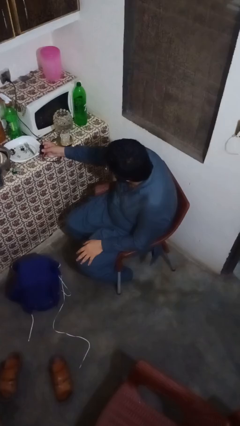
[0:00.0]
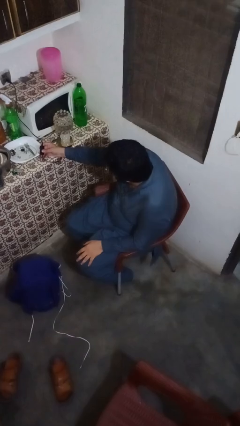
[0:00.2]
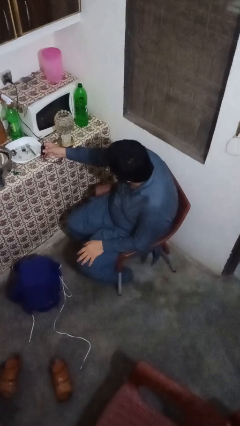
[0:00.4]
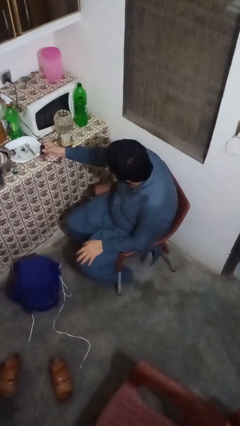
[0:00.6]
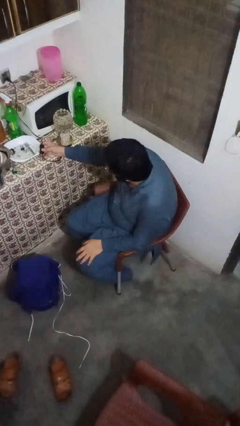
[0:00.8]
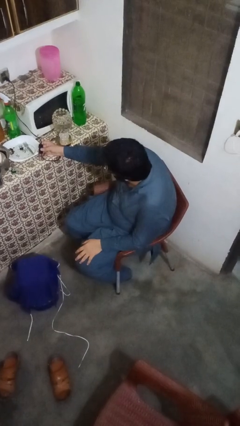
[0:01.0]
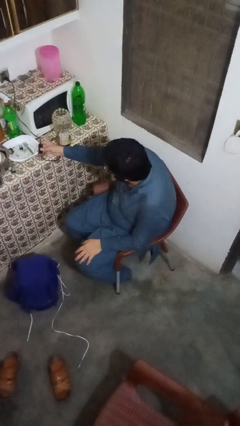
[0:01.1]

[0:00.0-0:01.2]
person turns off lamp

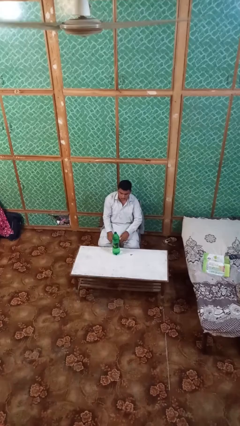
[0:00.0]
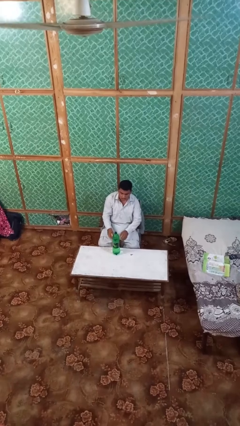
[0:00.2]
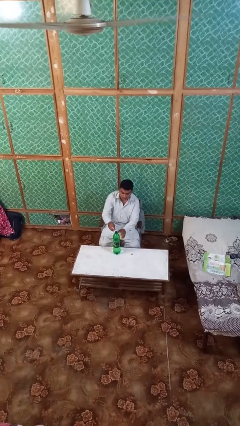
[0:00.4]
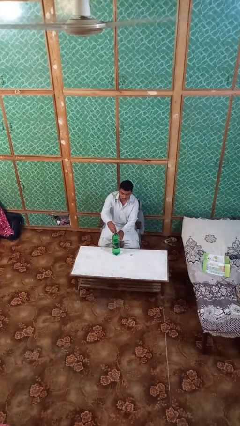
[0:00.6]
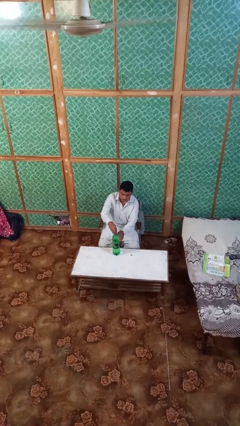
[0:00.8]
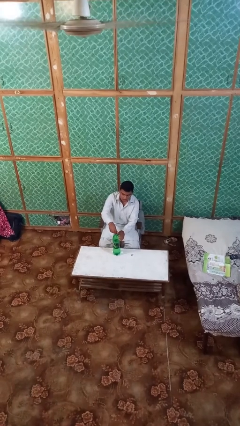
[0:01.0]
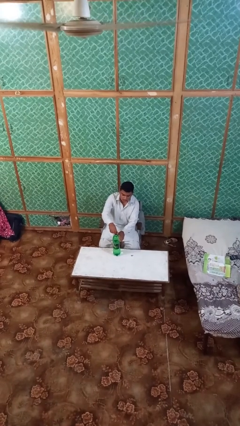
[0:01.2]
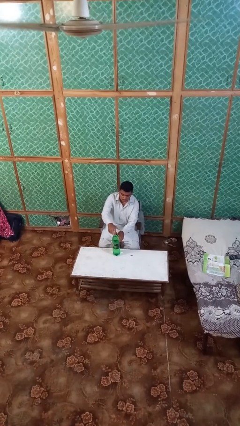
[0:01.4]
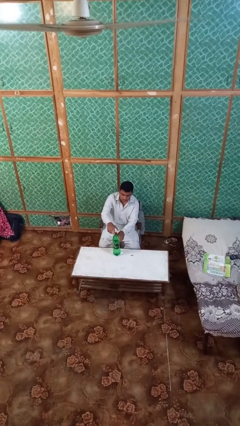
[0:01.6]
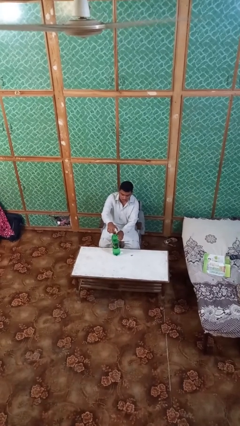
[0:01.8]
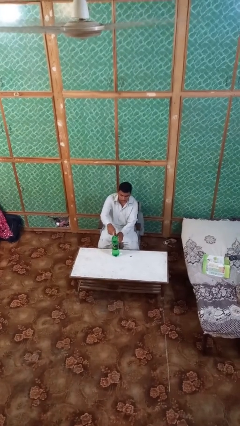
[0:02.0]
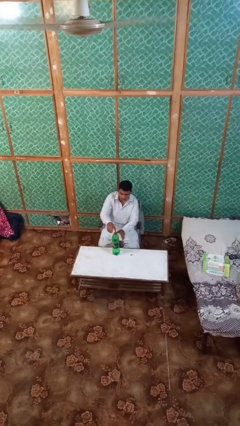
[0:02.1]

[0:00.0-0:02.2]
person screws lid to bottle

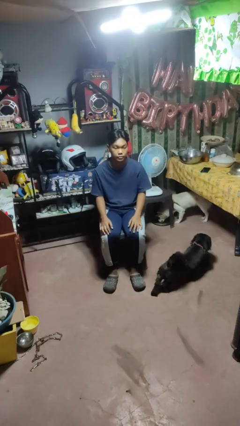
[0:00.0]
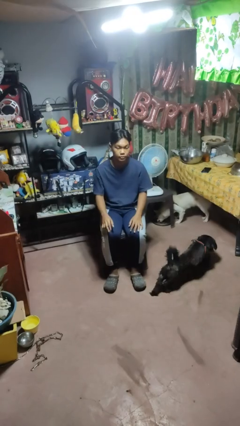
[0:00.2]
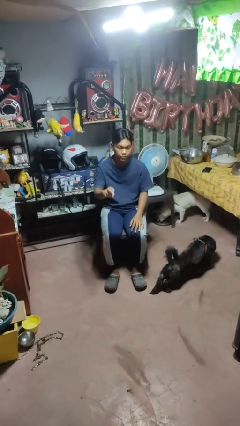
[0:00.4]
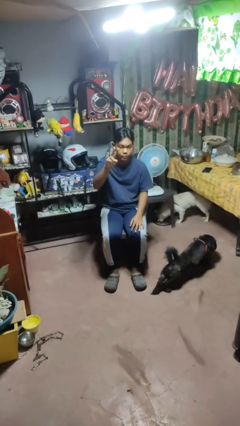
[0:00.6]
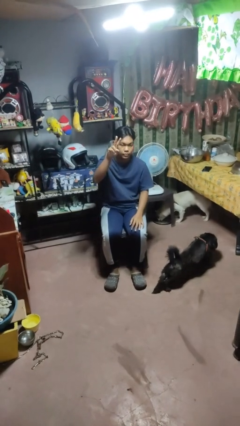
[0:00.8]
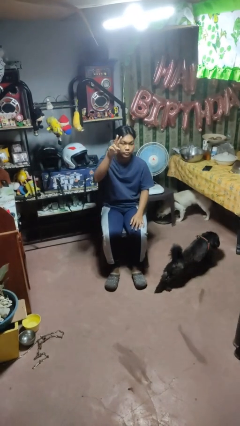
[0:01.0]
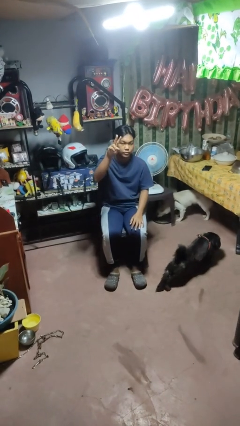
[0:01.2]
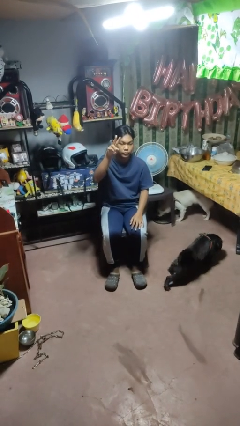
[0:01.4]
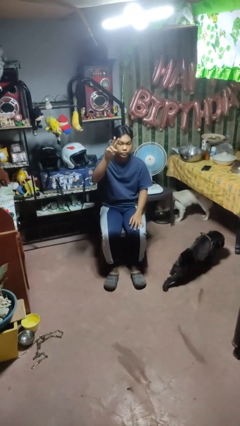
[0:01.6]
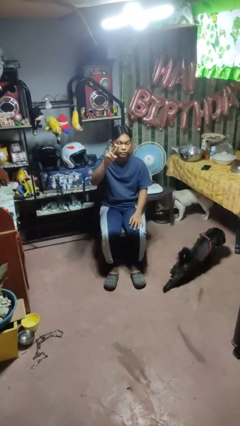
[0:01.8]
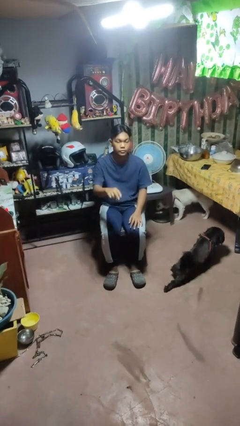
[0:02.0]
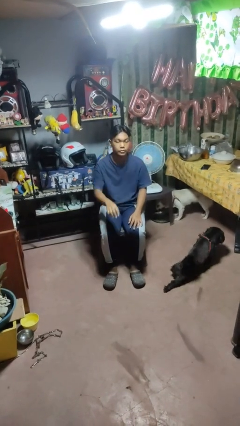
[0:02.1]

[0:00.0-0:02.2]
person gestures peace

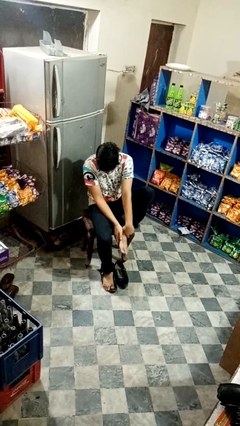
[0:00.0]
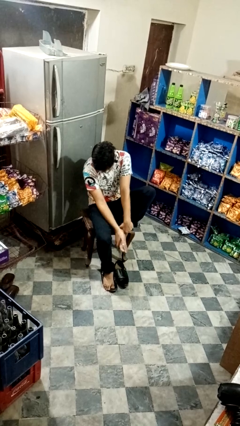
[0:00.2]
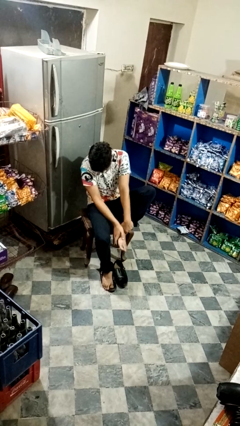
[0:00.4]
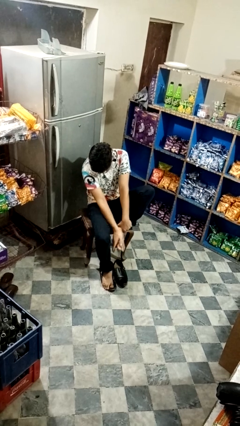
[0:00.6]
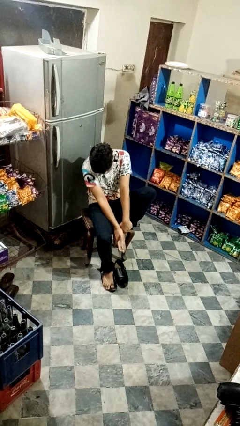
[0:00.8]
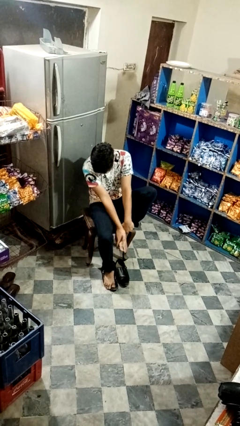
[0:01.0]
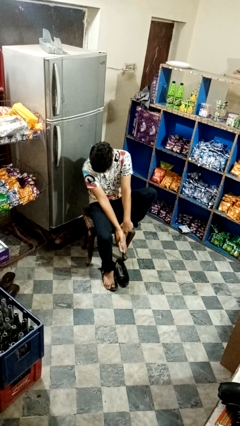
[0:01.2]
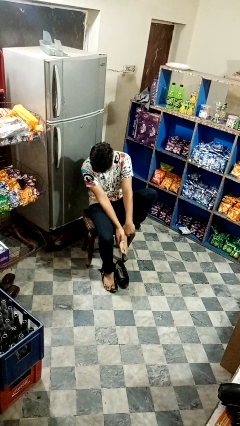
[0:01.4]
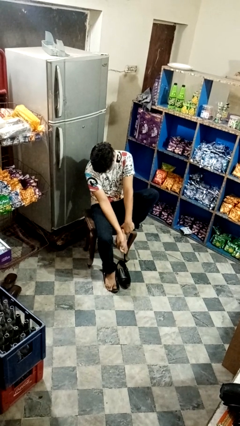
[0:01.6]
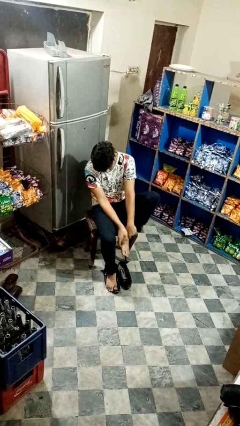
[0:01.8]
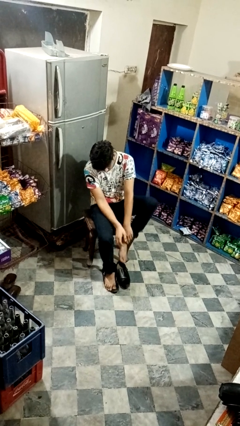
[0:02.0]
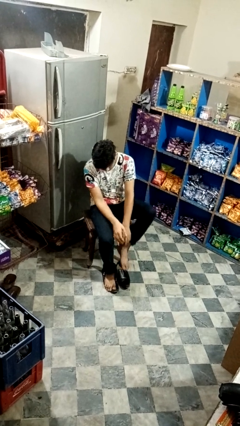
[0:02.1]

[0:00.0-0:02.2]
person rubs foot

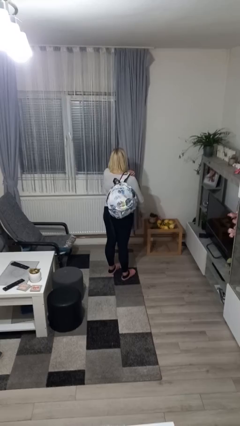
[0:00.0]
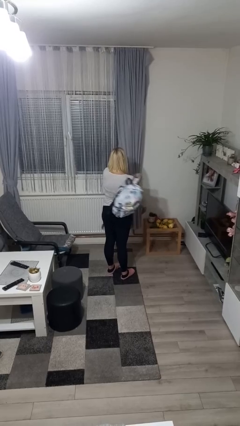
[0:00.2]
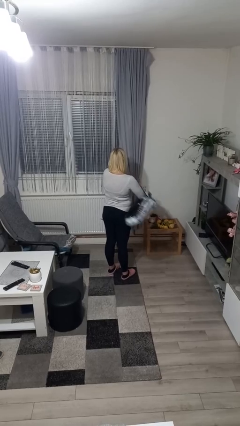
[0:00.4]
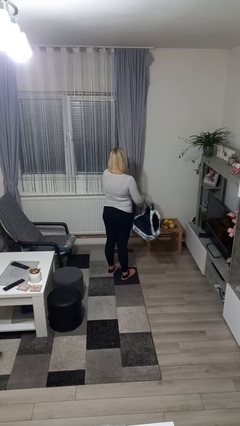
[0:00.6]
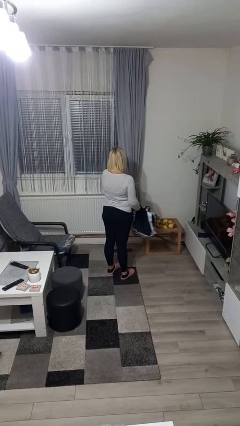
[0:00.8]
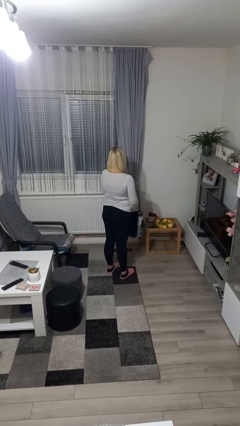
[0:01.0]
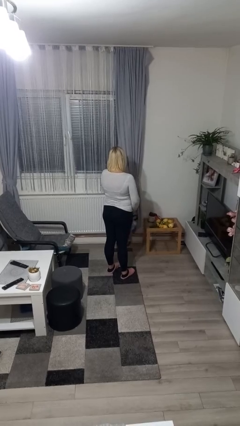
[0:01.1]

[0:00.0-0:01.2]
person takes off backpack

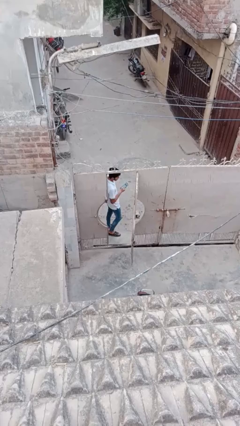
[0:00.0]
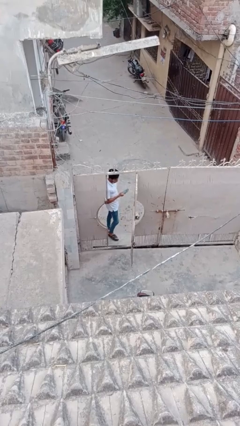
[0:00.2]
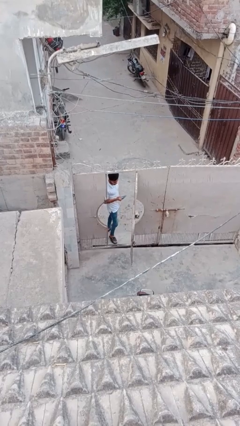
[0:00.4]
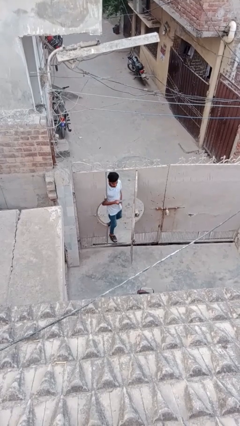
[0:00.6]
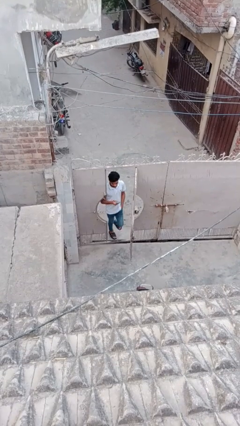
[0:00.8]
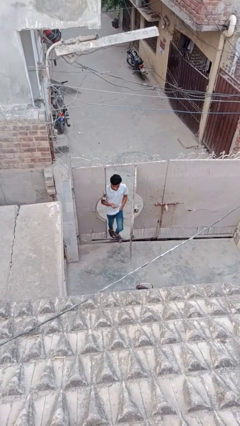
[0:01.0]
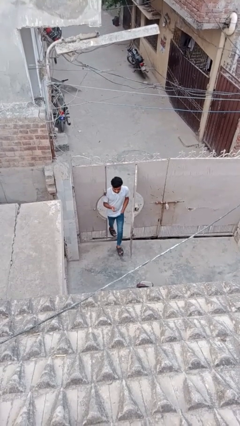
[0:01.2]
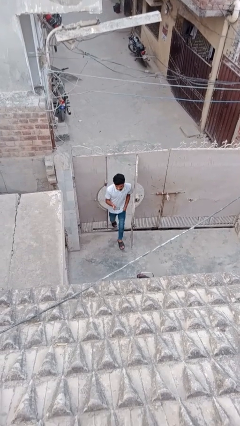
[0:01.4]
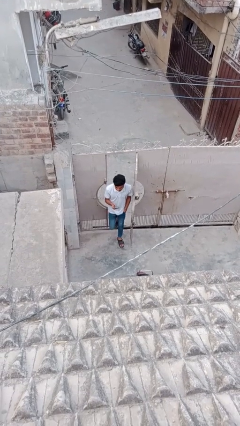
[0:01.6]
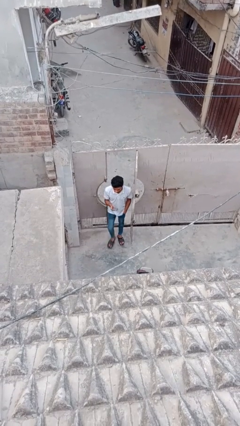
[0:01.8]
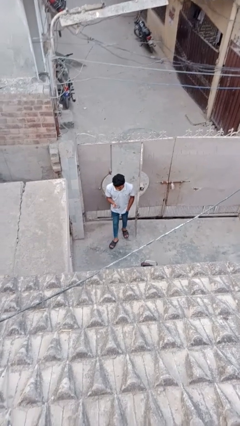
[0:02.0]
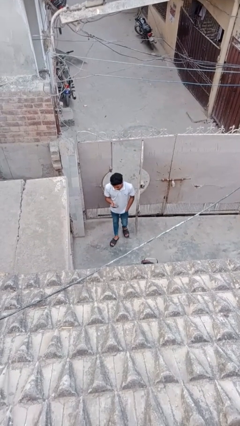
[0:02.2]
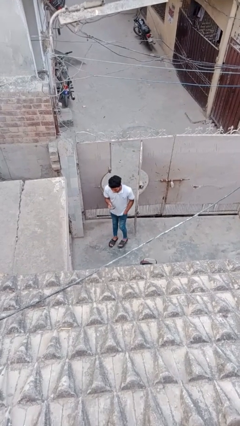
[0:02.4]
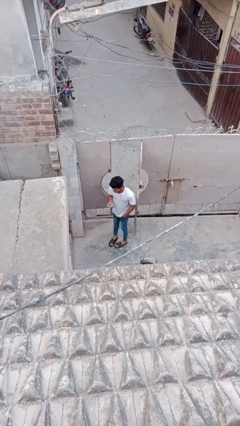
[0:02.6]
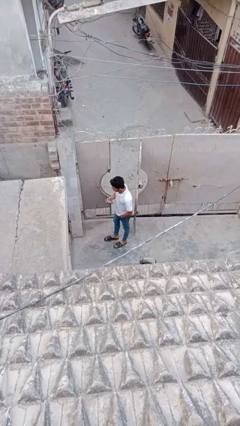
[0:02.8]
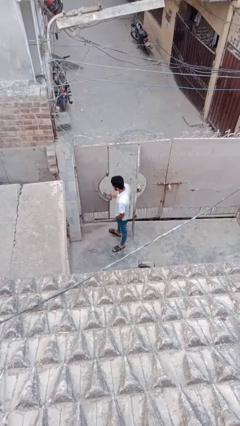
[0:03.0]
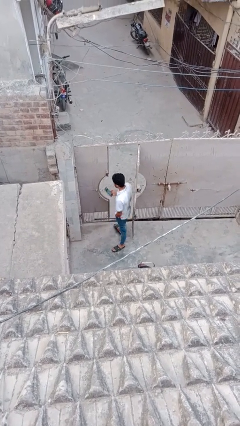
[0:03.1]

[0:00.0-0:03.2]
person enters scene through structure

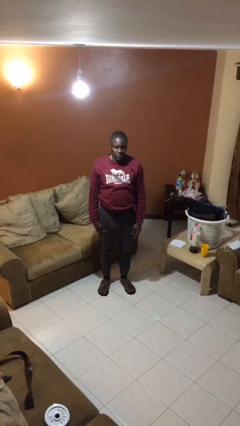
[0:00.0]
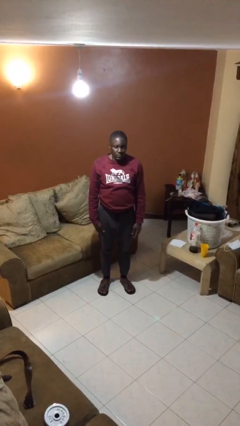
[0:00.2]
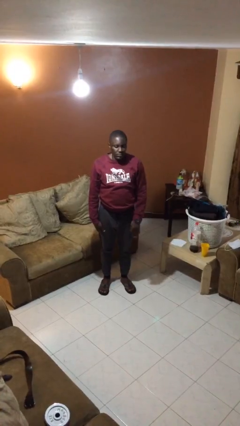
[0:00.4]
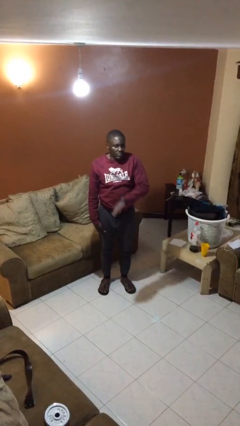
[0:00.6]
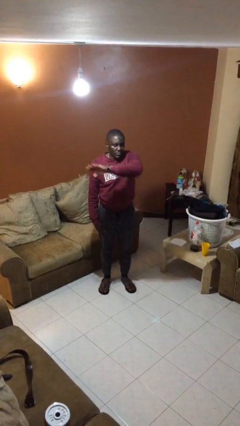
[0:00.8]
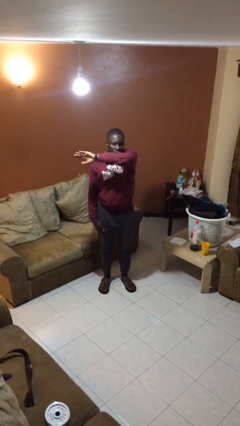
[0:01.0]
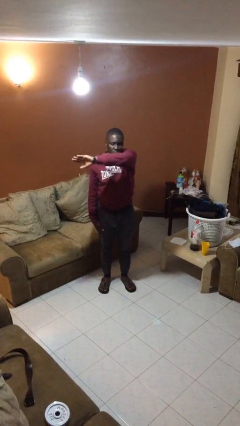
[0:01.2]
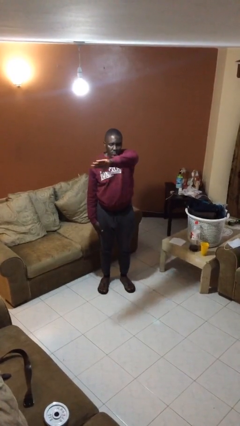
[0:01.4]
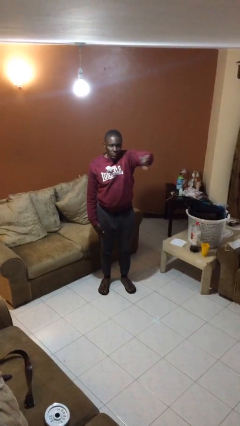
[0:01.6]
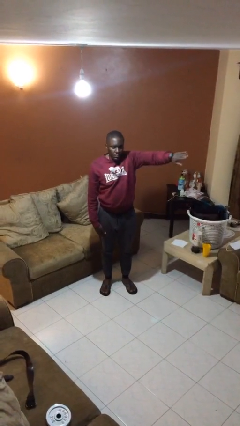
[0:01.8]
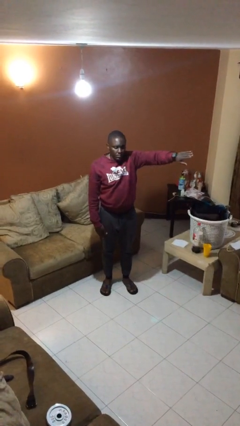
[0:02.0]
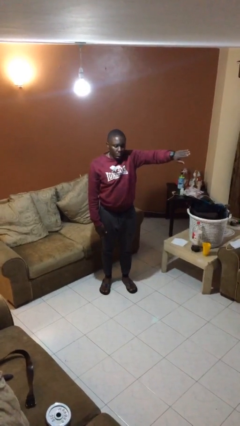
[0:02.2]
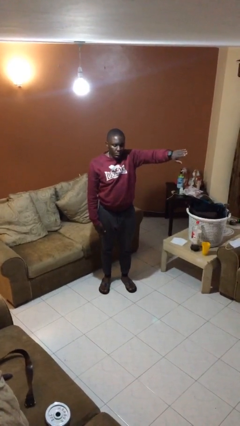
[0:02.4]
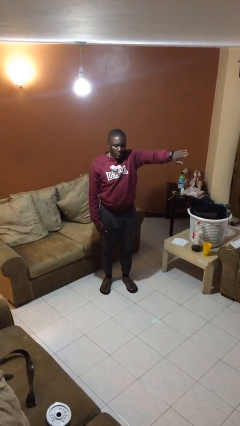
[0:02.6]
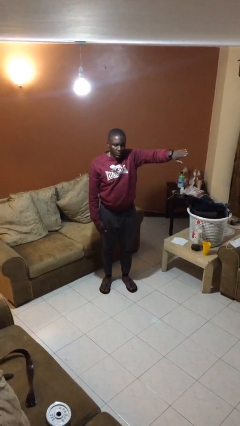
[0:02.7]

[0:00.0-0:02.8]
person gestures swipe left

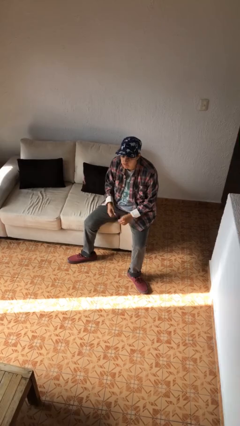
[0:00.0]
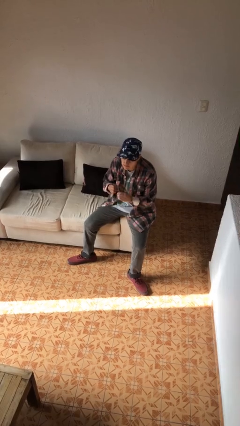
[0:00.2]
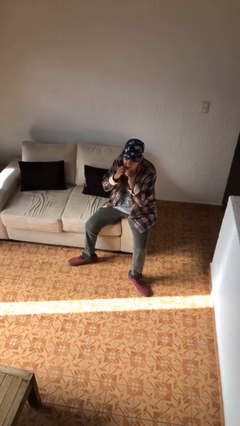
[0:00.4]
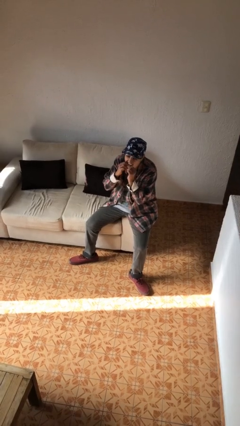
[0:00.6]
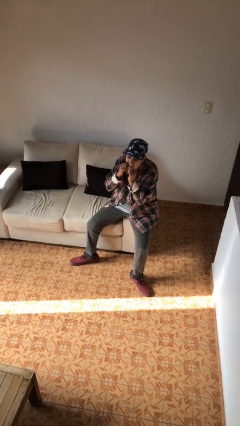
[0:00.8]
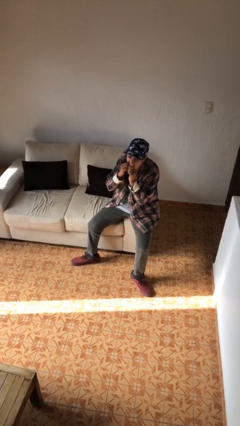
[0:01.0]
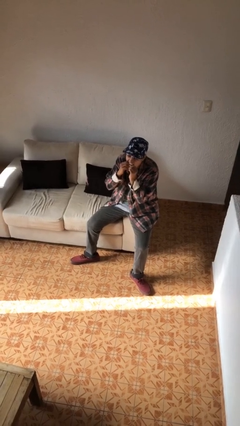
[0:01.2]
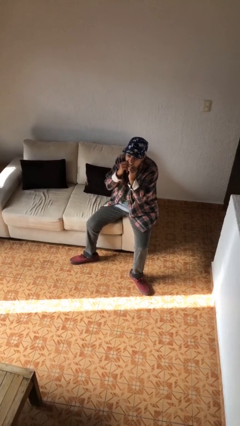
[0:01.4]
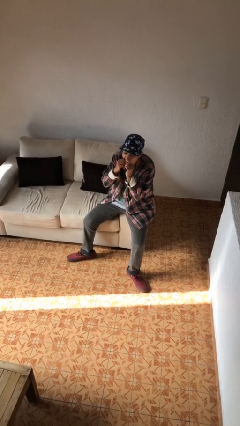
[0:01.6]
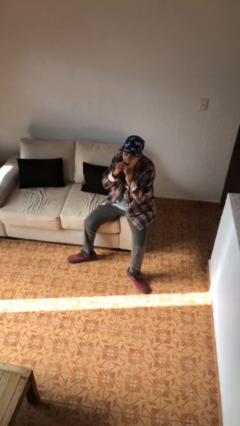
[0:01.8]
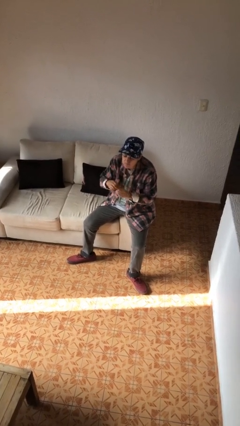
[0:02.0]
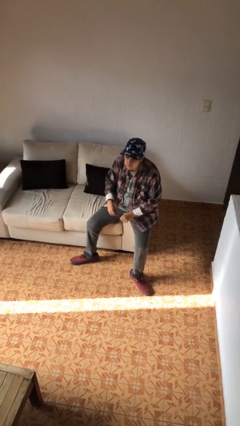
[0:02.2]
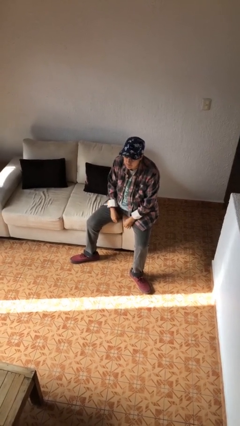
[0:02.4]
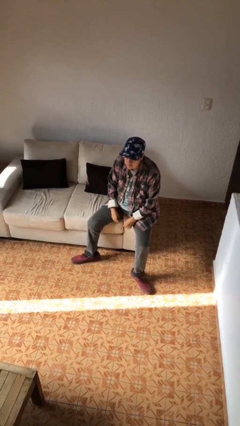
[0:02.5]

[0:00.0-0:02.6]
person flosses
